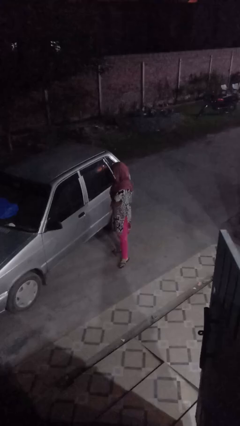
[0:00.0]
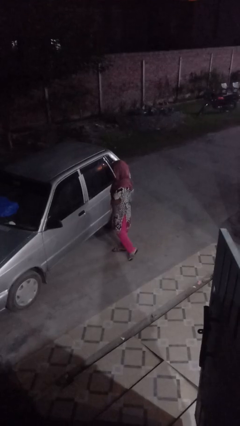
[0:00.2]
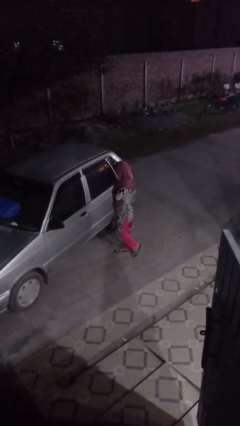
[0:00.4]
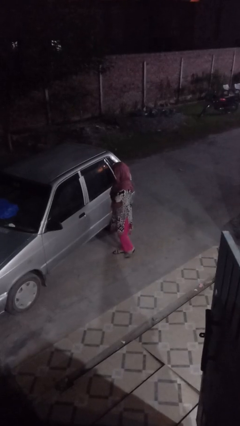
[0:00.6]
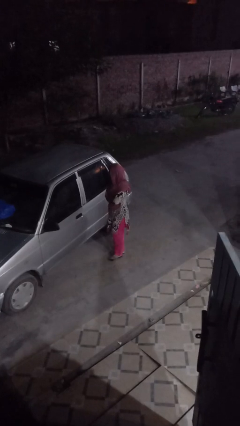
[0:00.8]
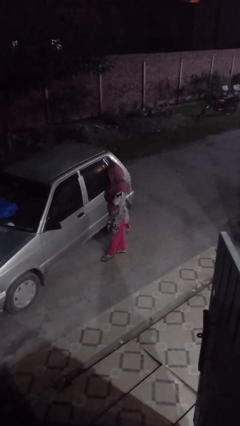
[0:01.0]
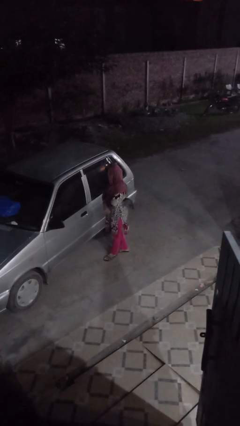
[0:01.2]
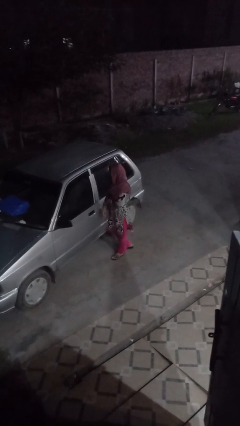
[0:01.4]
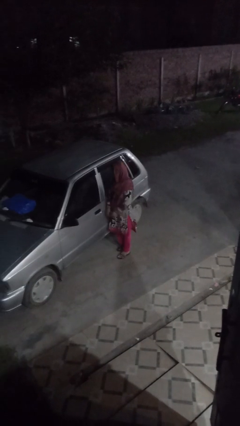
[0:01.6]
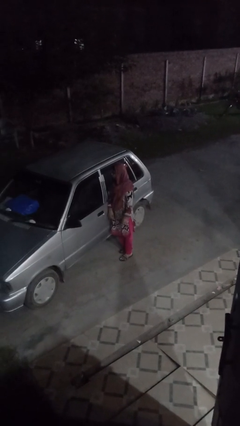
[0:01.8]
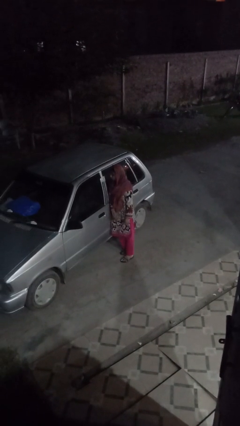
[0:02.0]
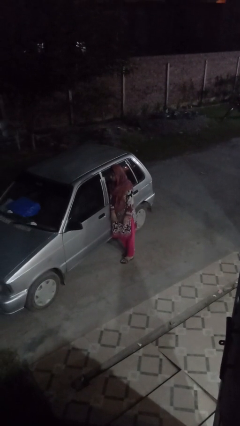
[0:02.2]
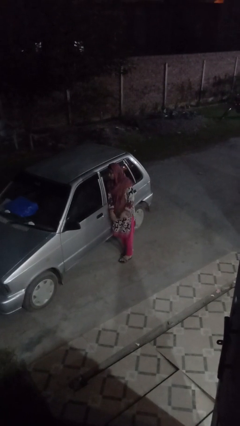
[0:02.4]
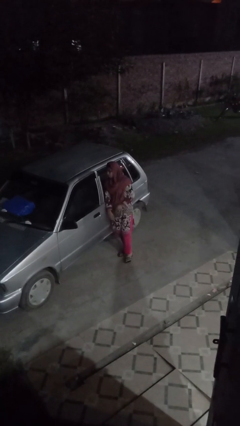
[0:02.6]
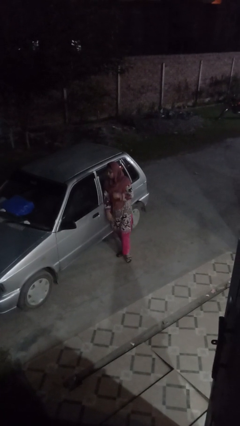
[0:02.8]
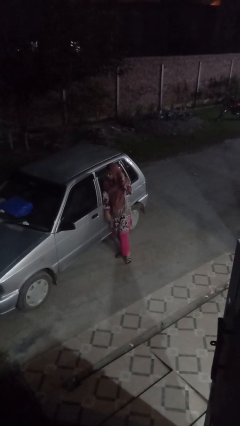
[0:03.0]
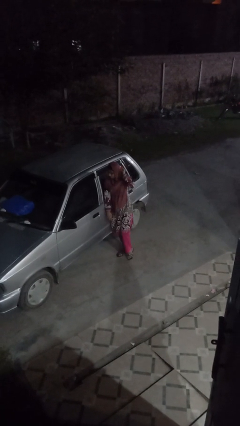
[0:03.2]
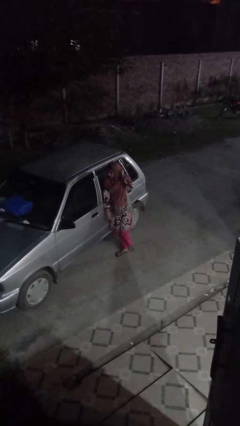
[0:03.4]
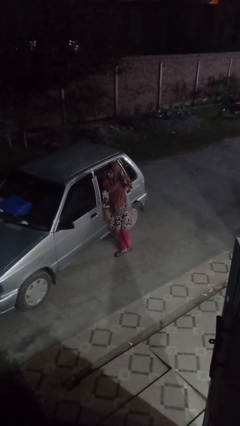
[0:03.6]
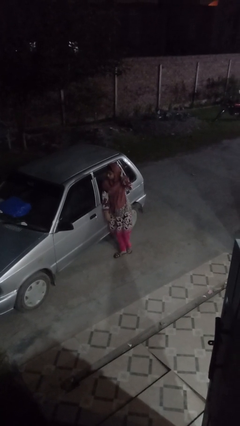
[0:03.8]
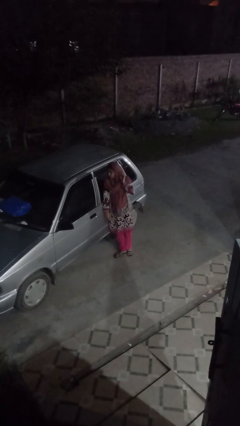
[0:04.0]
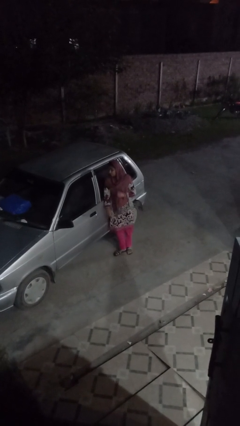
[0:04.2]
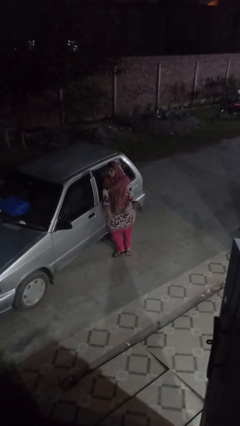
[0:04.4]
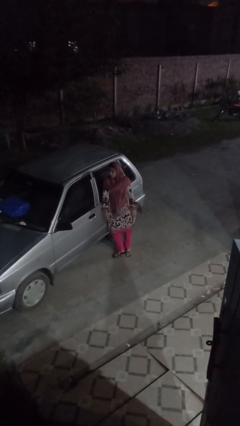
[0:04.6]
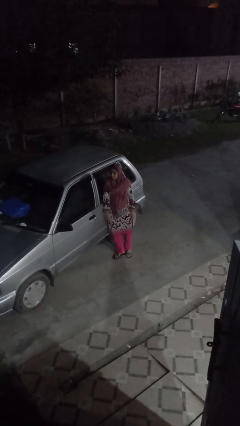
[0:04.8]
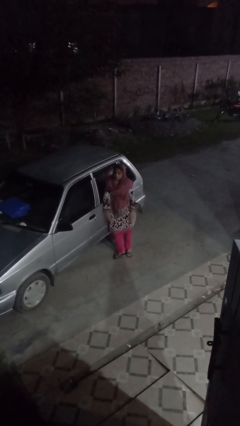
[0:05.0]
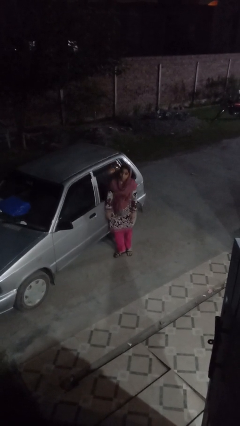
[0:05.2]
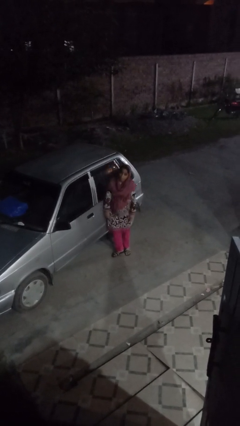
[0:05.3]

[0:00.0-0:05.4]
person leans against car

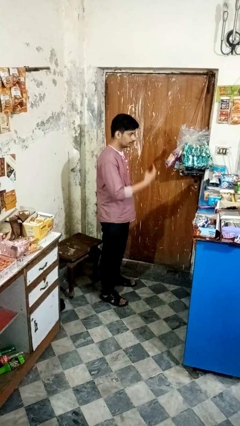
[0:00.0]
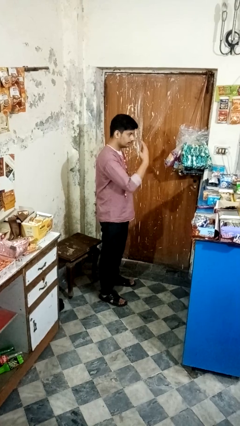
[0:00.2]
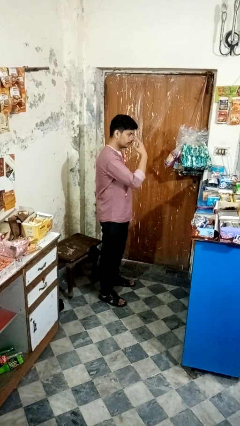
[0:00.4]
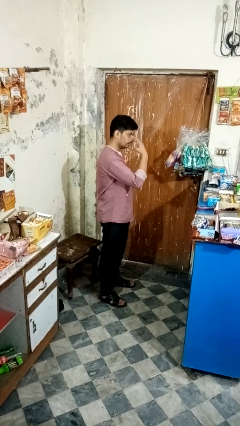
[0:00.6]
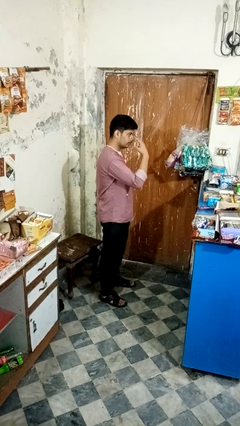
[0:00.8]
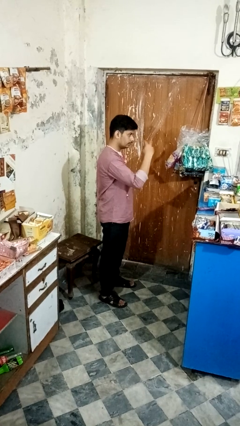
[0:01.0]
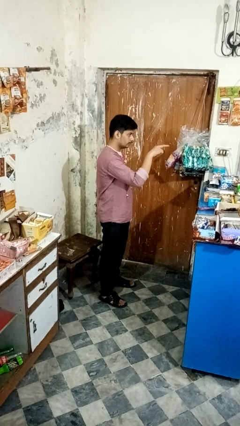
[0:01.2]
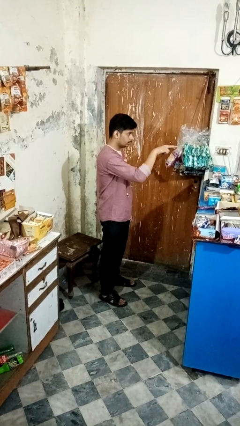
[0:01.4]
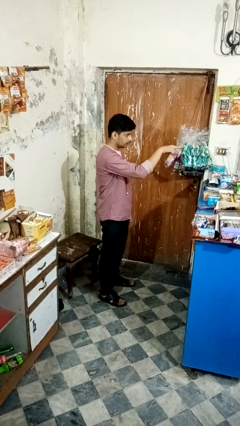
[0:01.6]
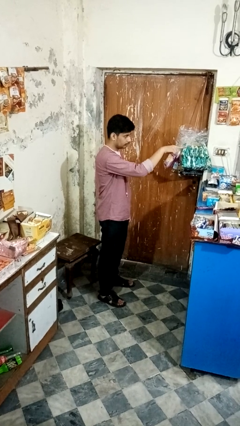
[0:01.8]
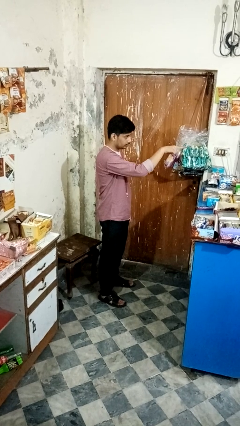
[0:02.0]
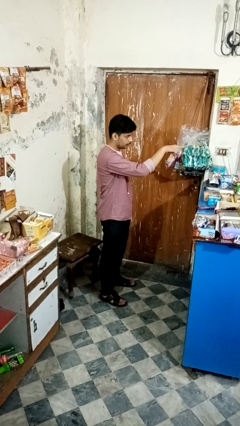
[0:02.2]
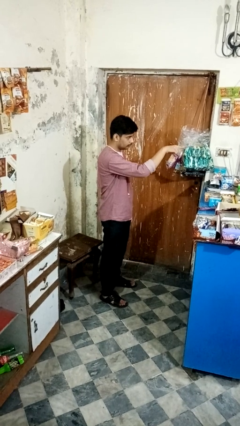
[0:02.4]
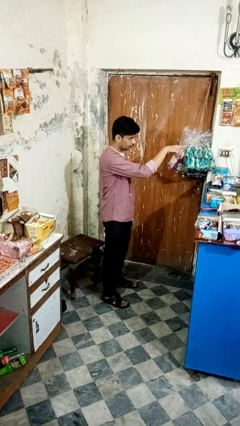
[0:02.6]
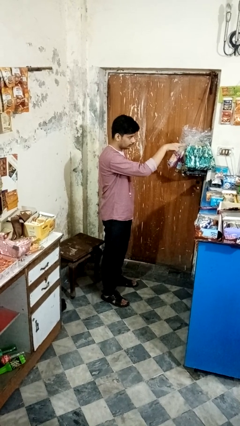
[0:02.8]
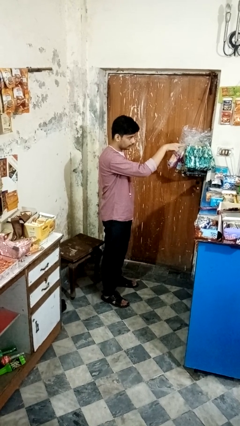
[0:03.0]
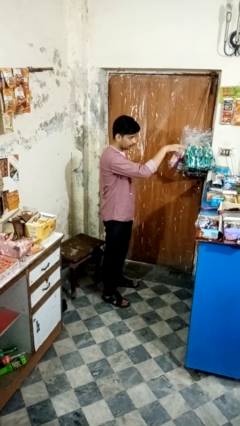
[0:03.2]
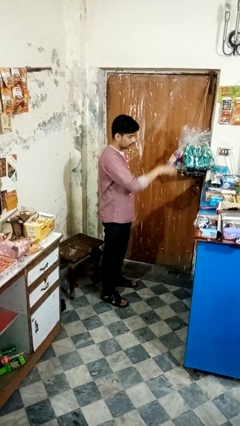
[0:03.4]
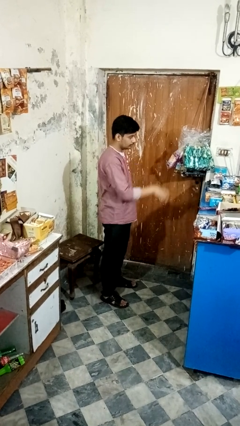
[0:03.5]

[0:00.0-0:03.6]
person gestures watch closely

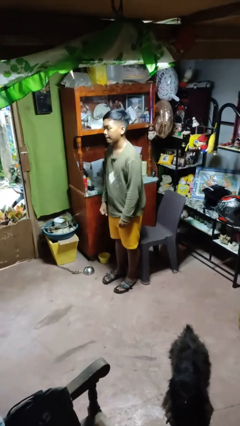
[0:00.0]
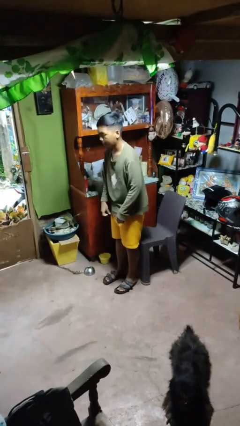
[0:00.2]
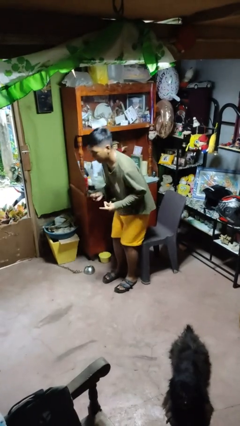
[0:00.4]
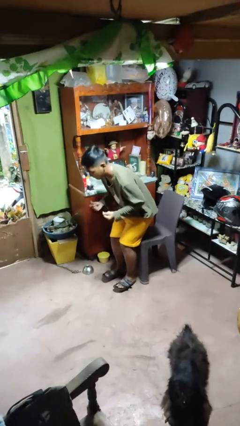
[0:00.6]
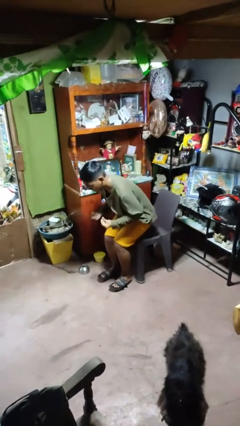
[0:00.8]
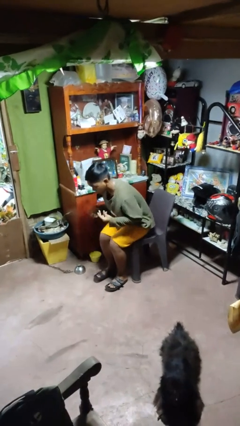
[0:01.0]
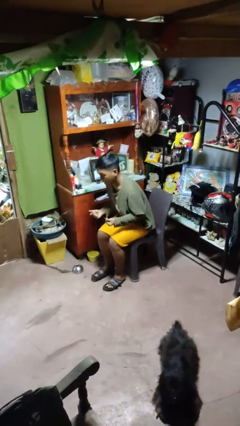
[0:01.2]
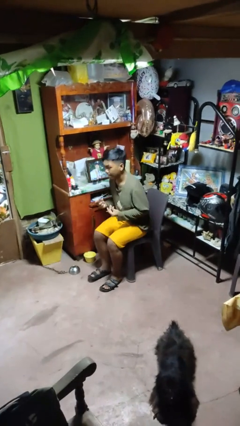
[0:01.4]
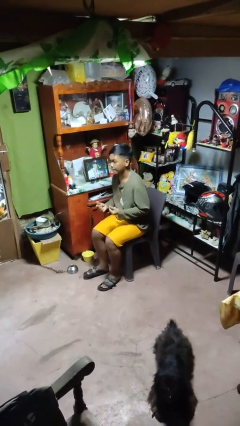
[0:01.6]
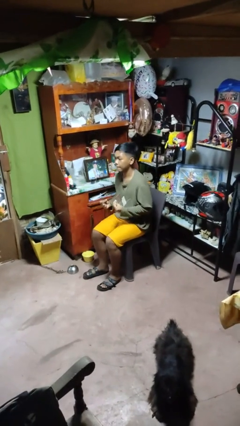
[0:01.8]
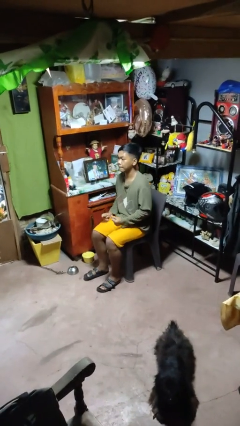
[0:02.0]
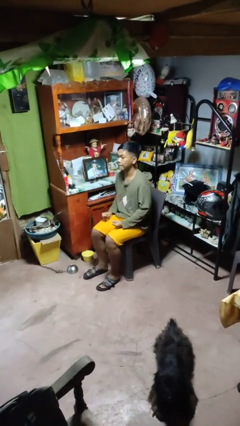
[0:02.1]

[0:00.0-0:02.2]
person snaps fingers

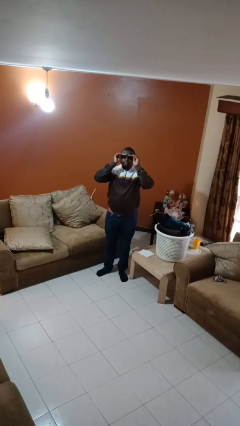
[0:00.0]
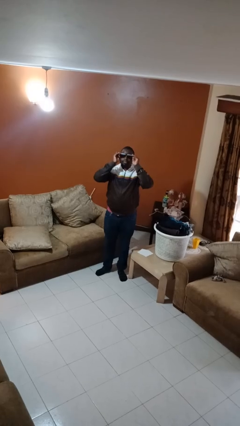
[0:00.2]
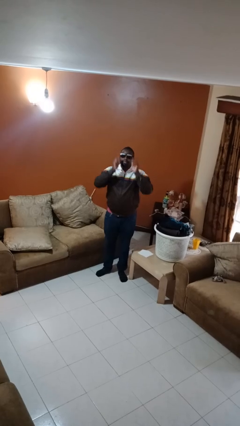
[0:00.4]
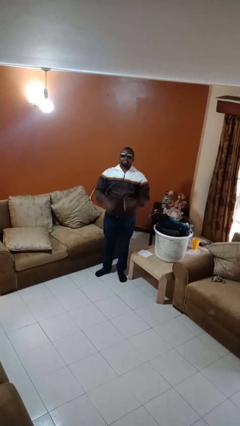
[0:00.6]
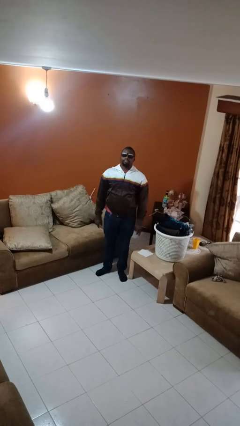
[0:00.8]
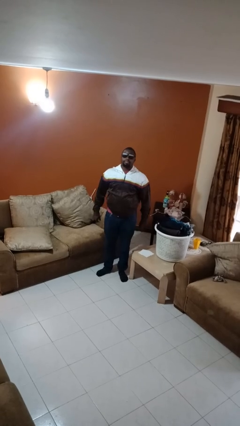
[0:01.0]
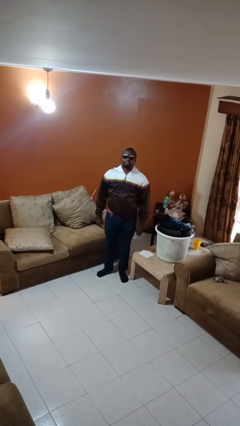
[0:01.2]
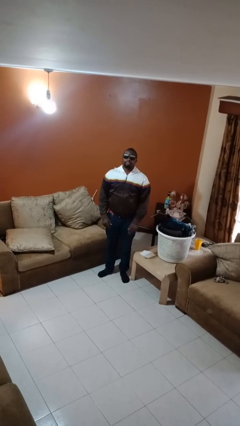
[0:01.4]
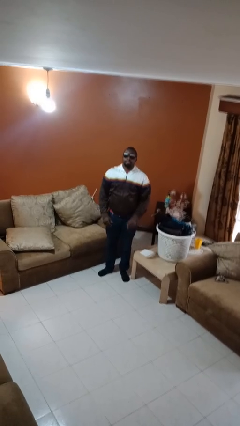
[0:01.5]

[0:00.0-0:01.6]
person puts on sunglasses

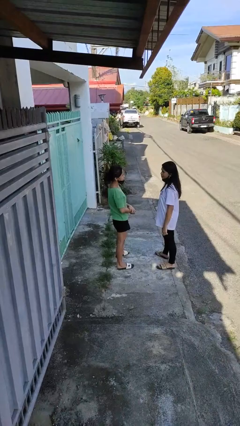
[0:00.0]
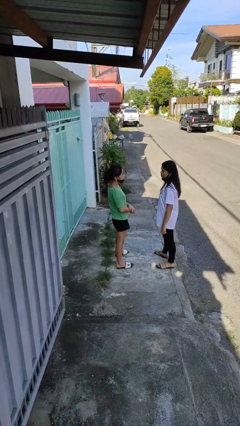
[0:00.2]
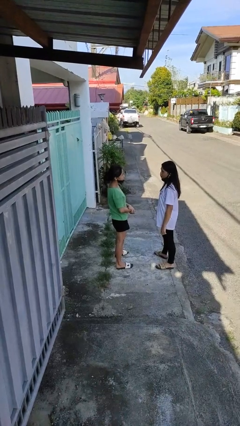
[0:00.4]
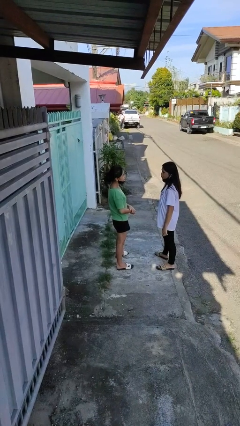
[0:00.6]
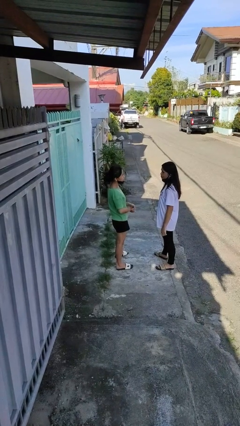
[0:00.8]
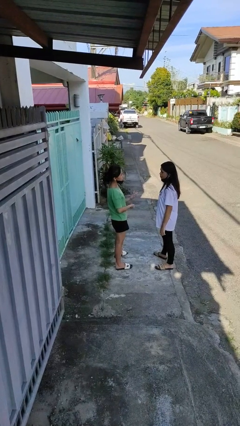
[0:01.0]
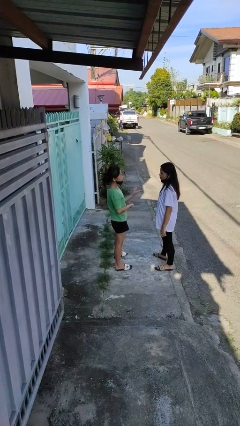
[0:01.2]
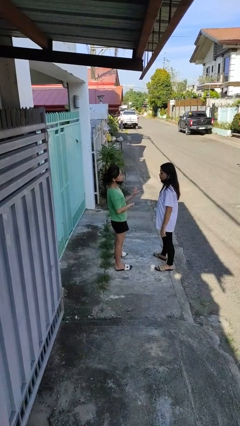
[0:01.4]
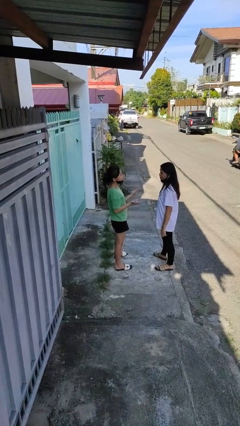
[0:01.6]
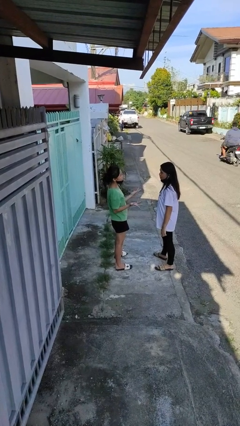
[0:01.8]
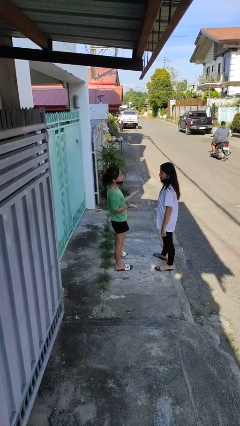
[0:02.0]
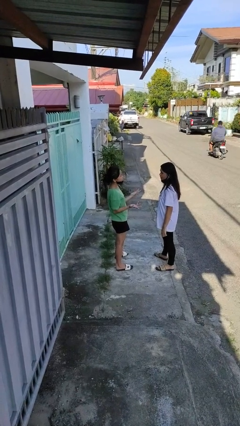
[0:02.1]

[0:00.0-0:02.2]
person talks to person

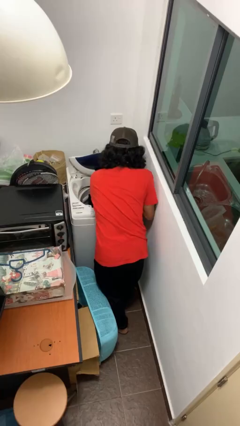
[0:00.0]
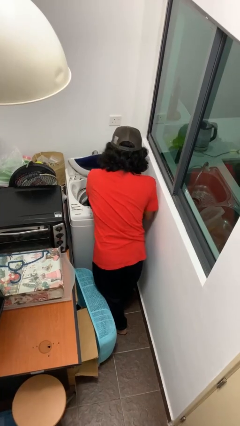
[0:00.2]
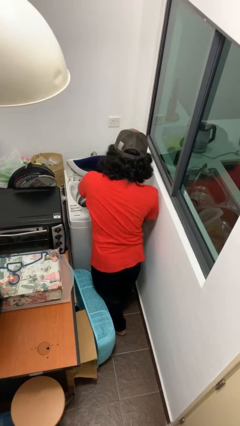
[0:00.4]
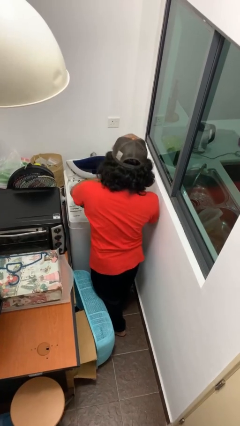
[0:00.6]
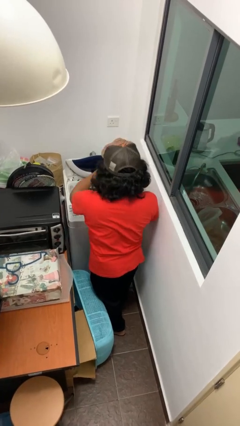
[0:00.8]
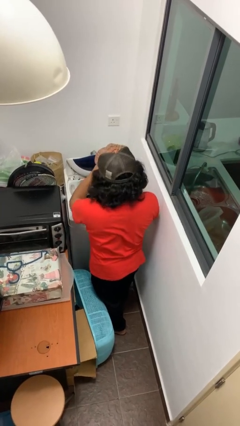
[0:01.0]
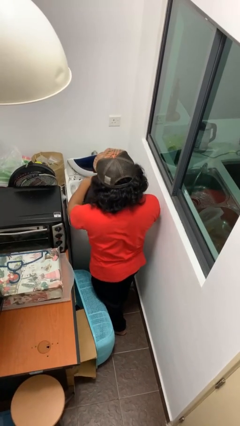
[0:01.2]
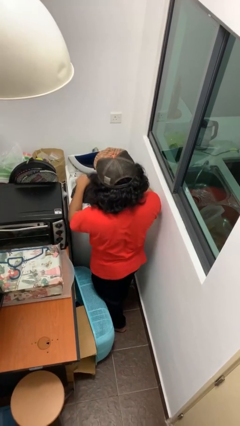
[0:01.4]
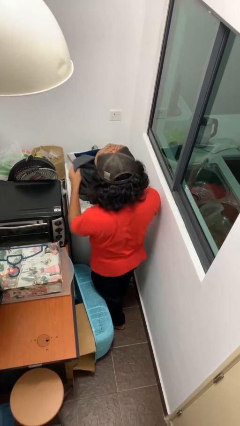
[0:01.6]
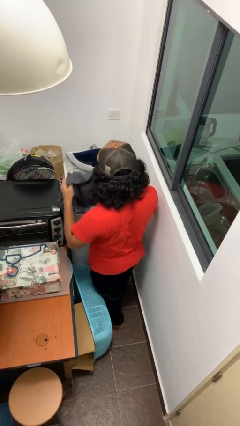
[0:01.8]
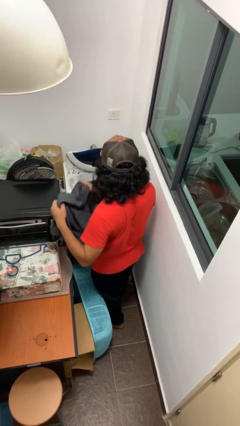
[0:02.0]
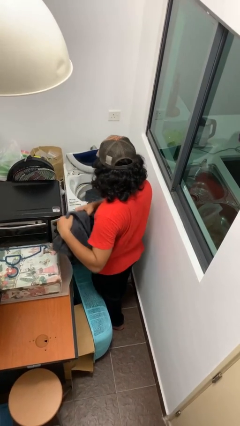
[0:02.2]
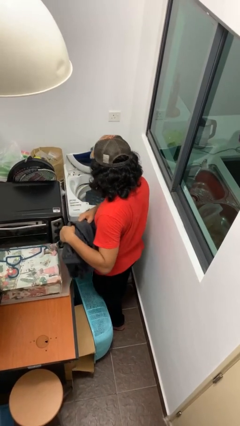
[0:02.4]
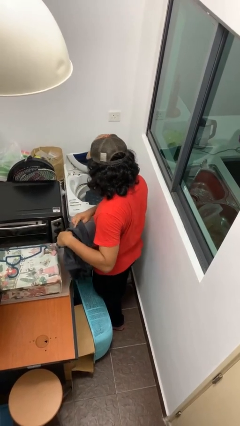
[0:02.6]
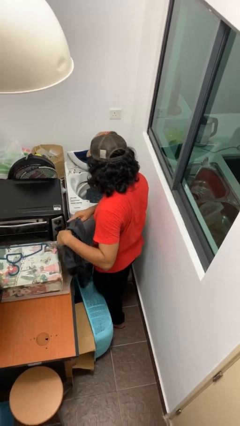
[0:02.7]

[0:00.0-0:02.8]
person unloads clotheswasher
